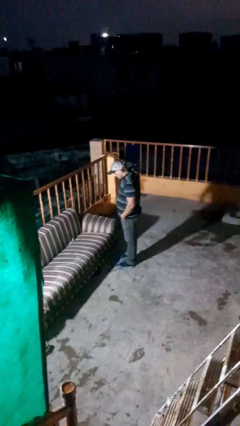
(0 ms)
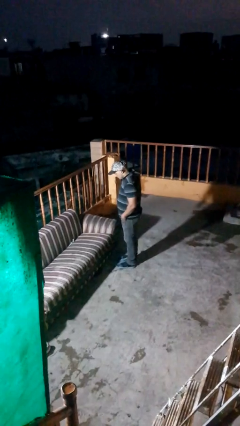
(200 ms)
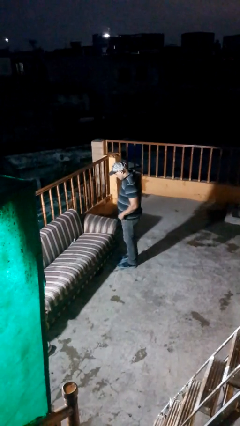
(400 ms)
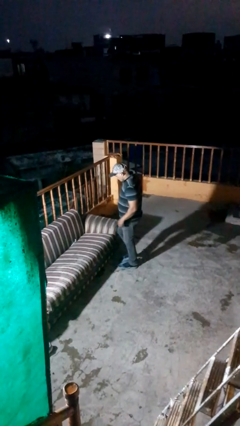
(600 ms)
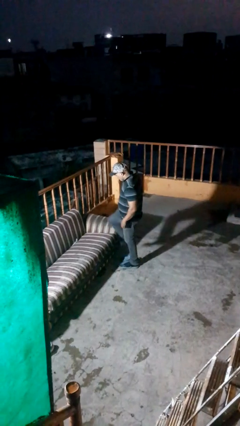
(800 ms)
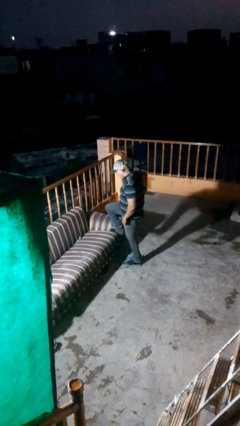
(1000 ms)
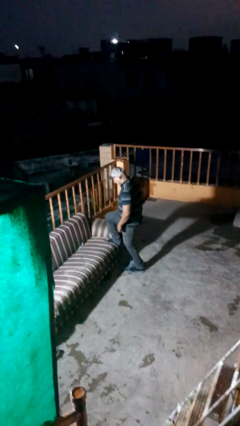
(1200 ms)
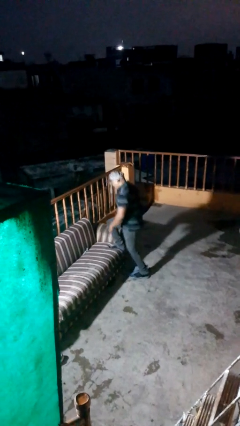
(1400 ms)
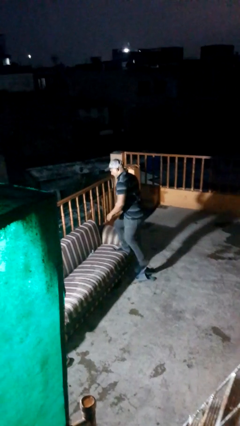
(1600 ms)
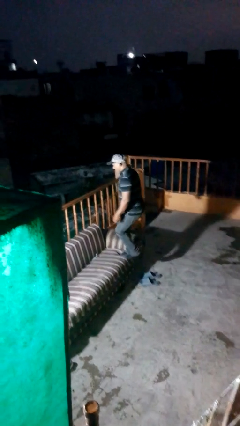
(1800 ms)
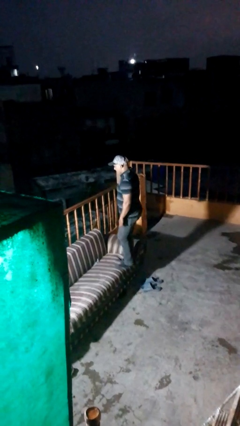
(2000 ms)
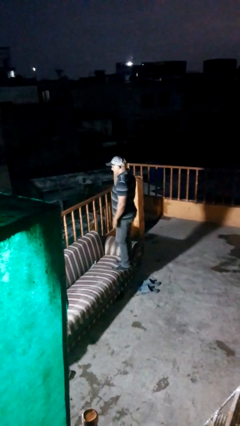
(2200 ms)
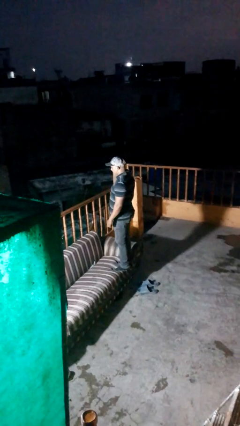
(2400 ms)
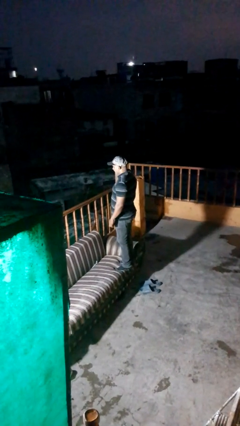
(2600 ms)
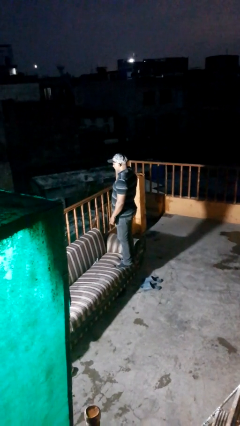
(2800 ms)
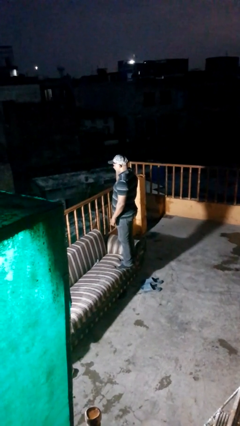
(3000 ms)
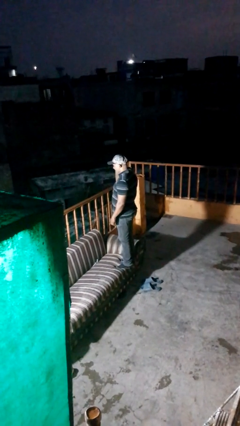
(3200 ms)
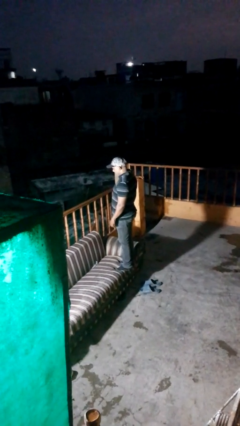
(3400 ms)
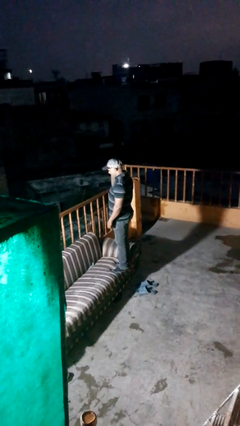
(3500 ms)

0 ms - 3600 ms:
person climbs on couch

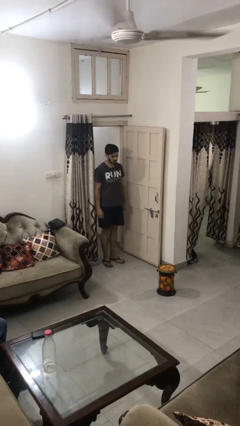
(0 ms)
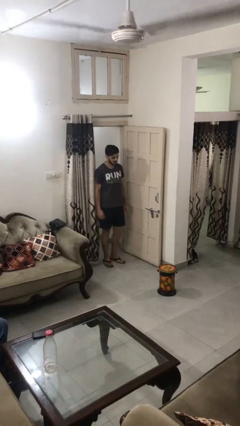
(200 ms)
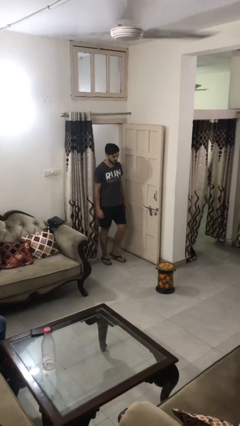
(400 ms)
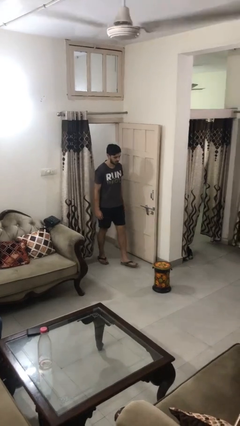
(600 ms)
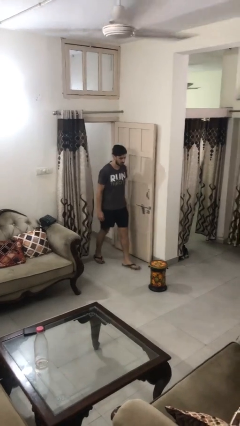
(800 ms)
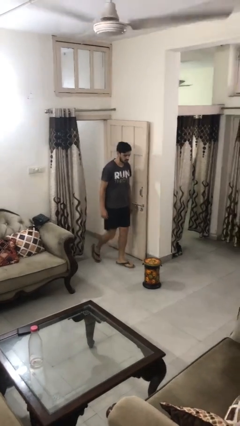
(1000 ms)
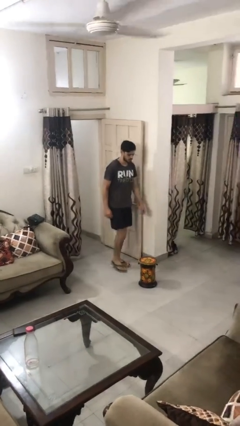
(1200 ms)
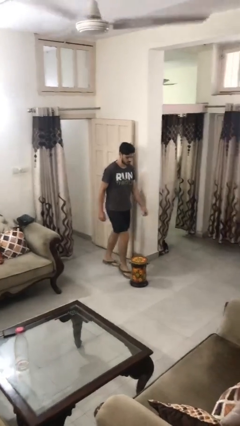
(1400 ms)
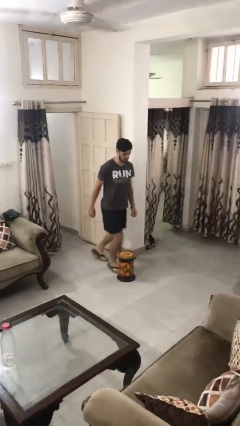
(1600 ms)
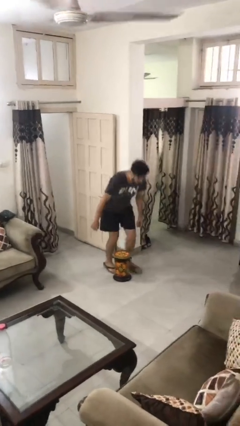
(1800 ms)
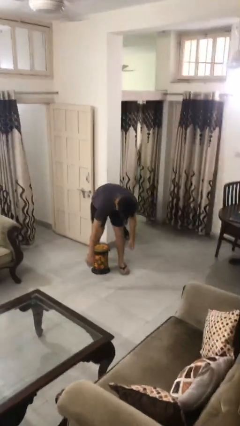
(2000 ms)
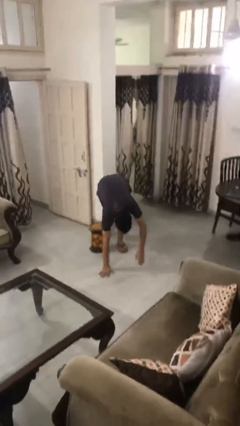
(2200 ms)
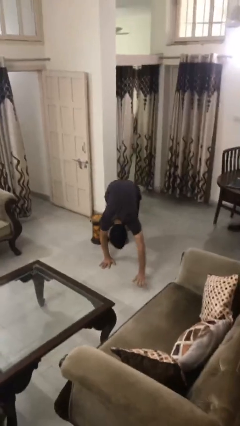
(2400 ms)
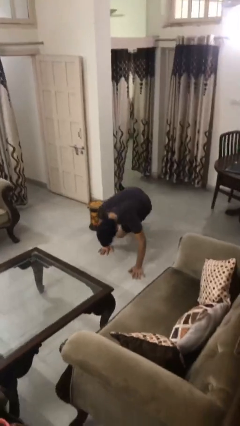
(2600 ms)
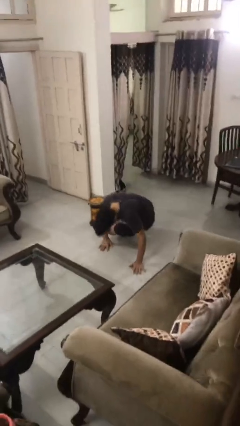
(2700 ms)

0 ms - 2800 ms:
person trips on object on floor

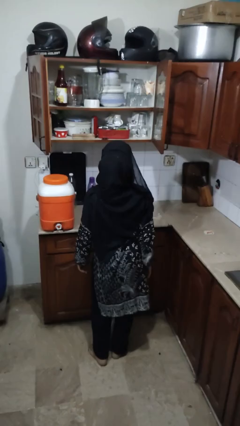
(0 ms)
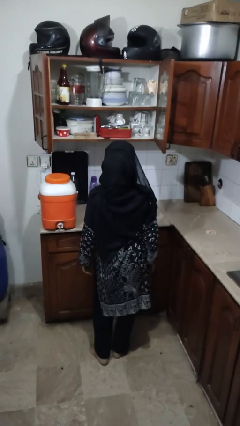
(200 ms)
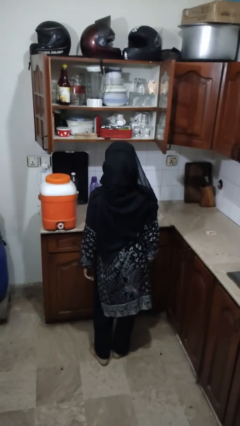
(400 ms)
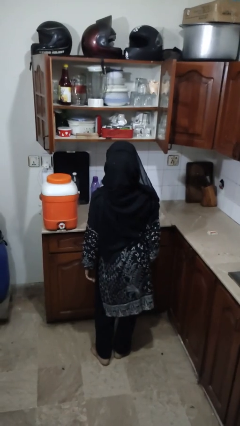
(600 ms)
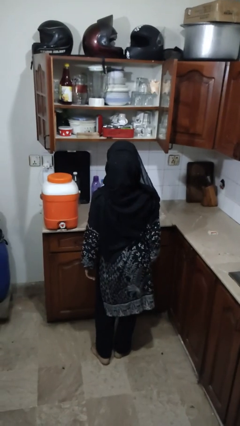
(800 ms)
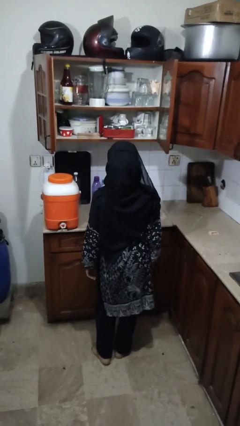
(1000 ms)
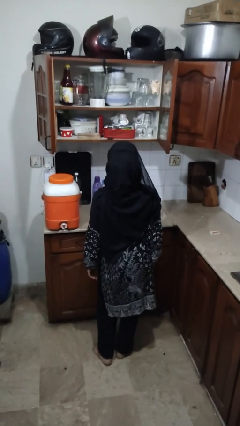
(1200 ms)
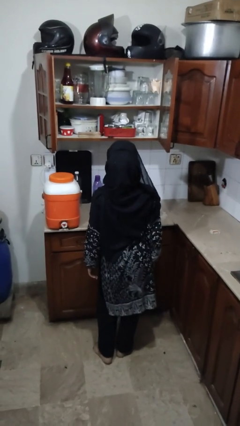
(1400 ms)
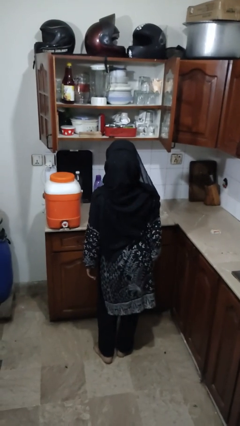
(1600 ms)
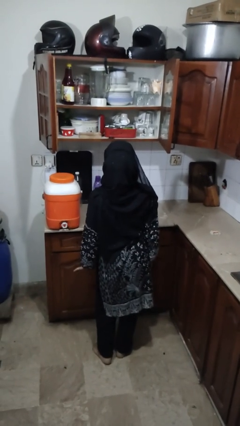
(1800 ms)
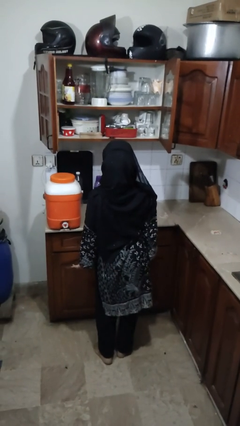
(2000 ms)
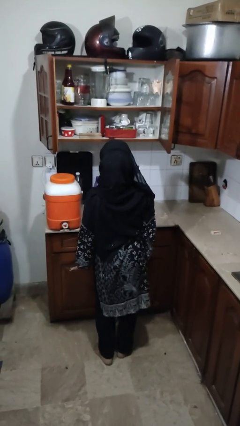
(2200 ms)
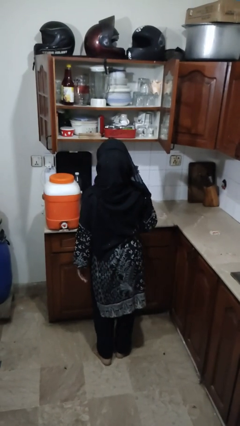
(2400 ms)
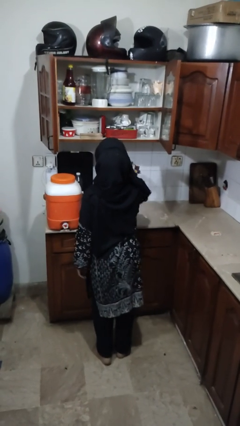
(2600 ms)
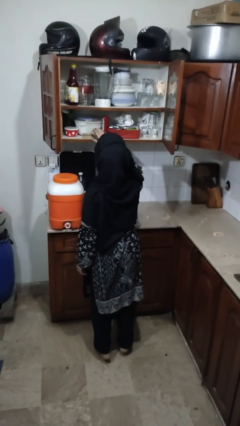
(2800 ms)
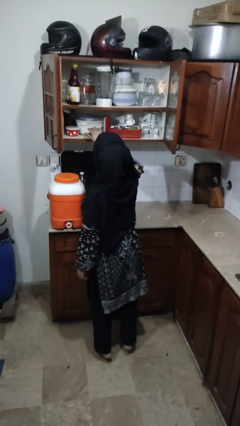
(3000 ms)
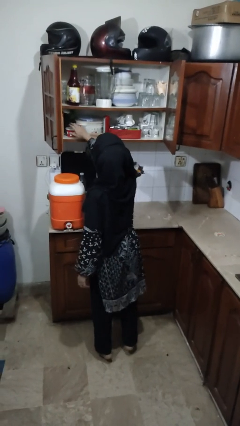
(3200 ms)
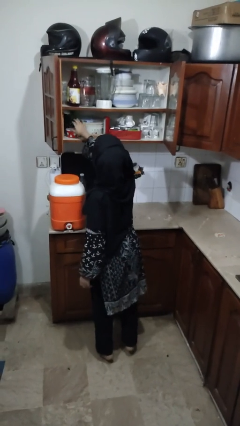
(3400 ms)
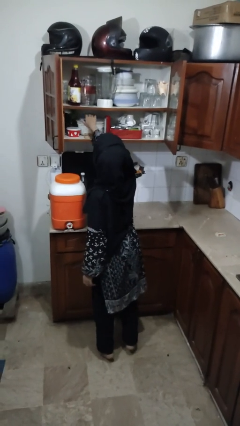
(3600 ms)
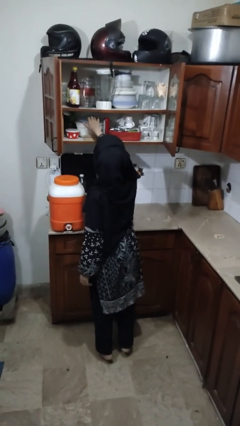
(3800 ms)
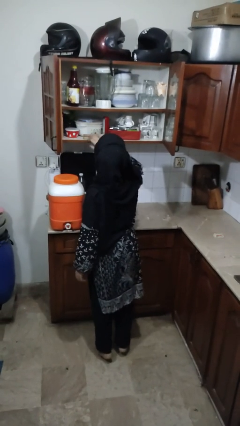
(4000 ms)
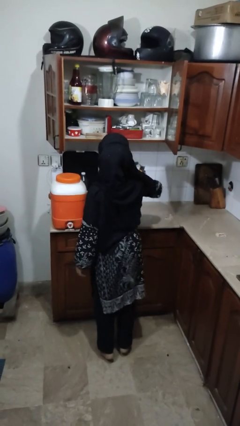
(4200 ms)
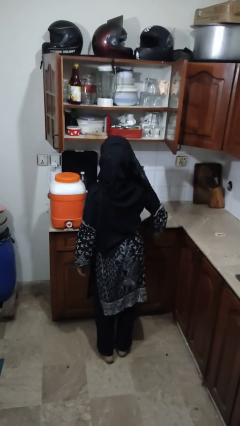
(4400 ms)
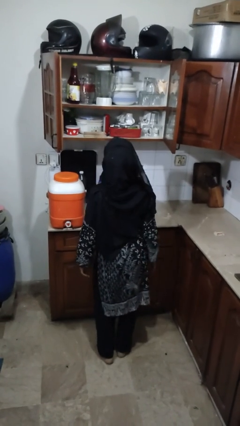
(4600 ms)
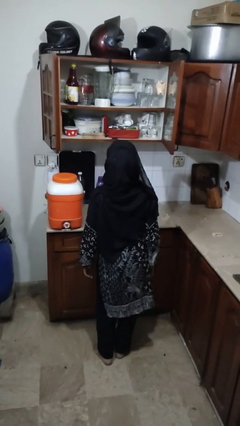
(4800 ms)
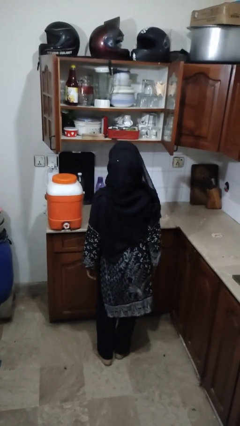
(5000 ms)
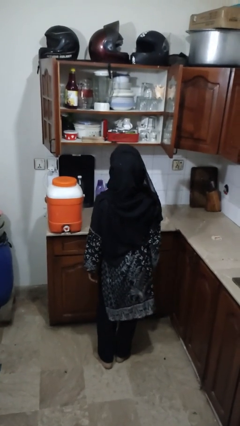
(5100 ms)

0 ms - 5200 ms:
person searches in cabinet

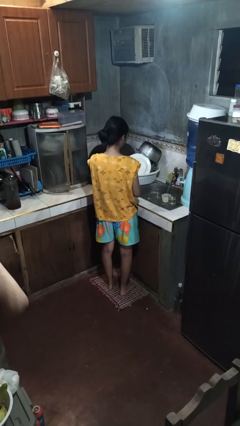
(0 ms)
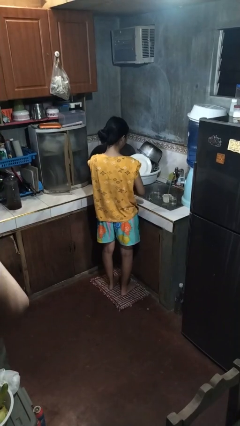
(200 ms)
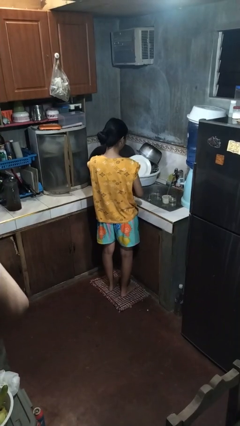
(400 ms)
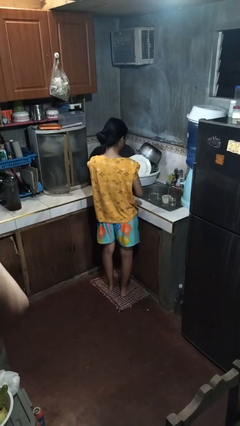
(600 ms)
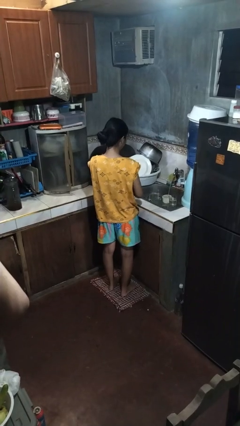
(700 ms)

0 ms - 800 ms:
person turns off faucet

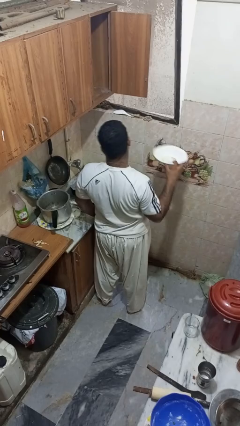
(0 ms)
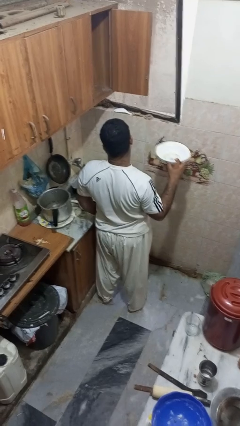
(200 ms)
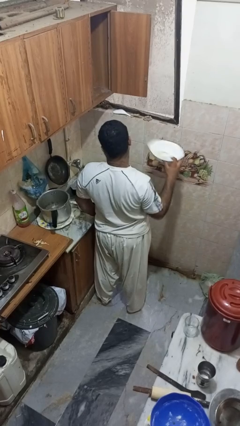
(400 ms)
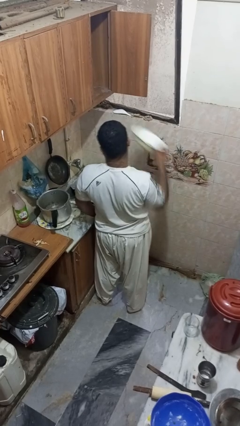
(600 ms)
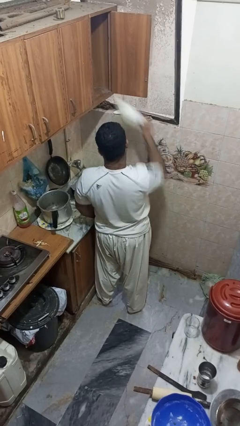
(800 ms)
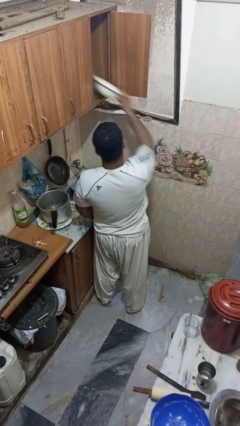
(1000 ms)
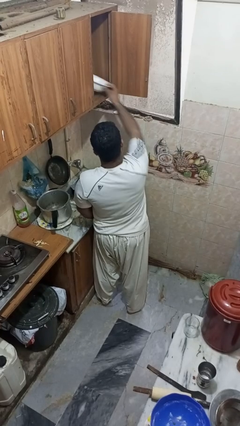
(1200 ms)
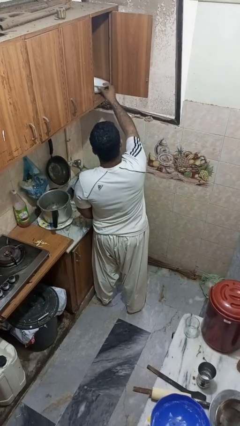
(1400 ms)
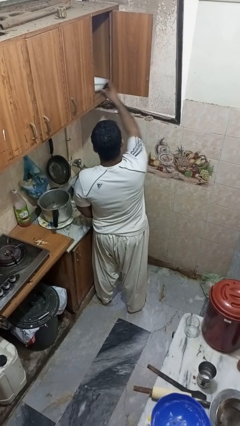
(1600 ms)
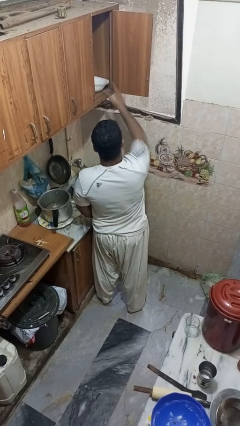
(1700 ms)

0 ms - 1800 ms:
person puts object in cabinet

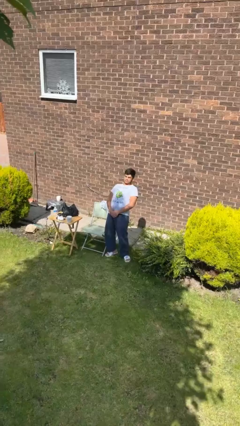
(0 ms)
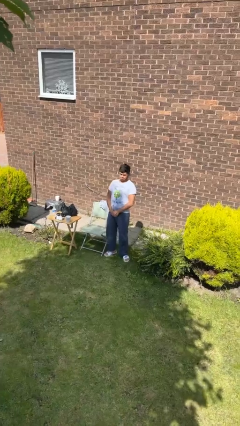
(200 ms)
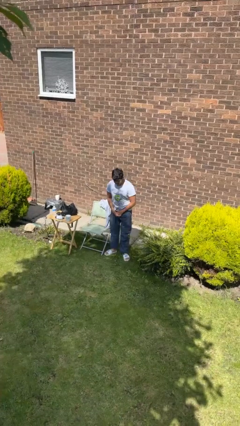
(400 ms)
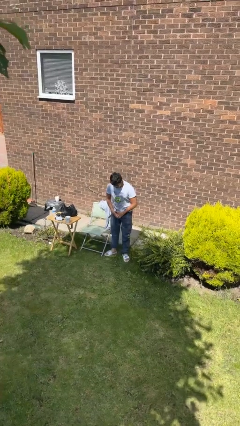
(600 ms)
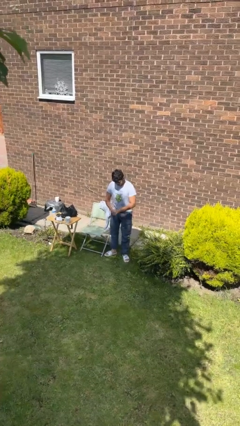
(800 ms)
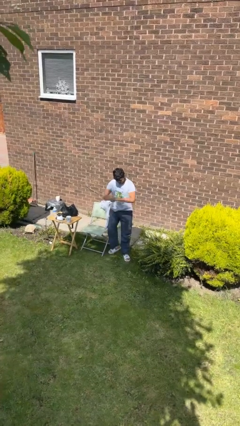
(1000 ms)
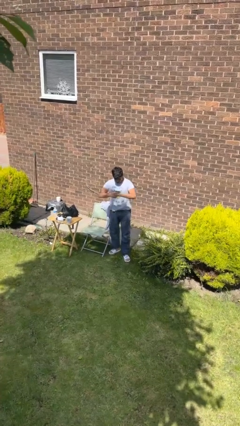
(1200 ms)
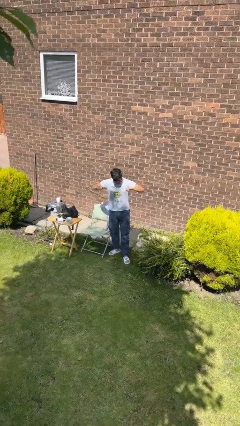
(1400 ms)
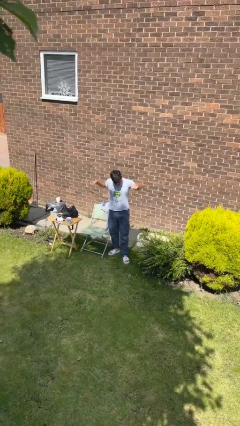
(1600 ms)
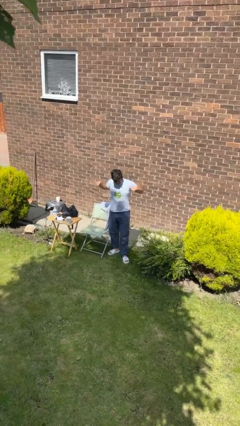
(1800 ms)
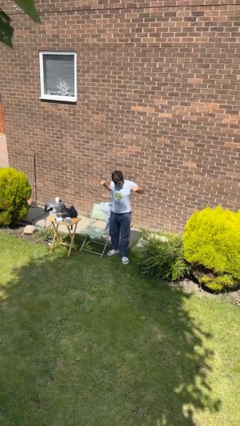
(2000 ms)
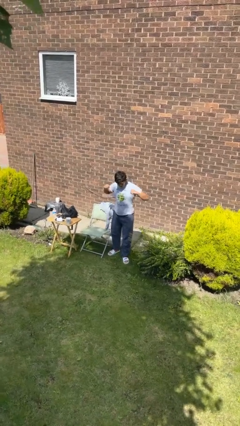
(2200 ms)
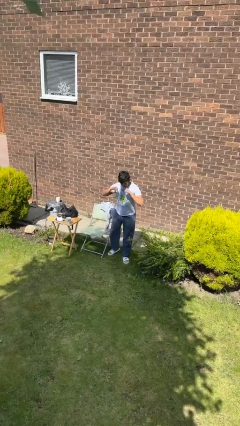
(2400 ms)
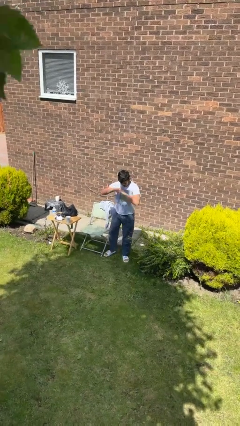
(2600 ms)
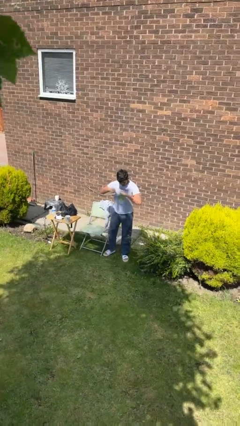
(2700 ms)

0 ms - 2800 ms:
person stretches arms to side

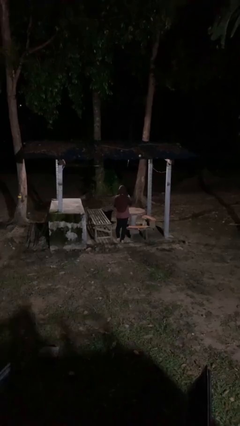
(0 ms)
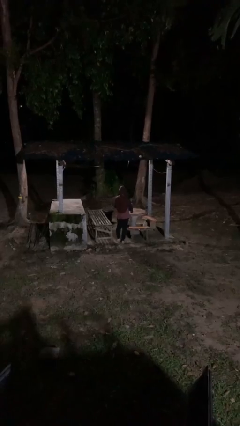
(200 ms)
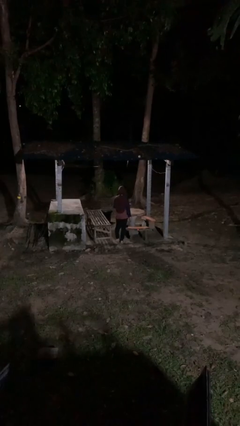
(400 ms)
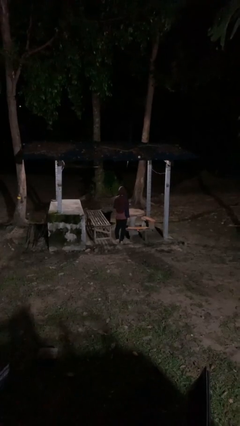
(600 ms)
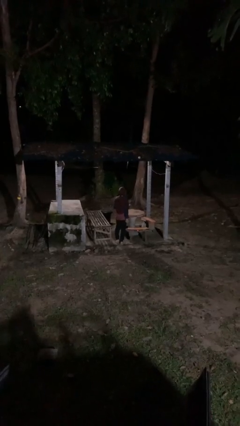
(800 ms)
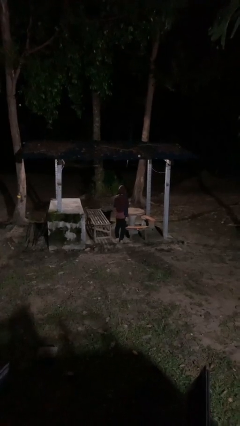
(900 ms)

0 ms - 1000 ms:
person gestures be quiet
